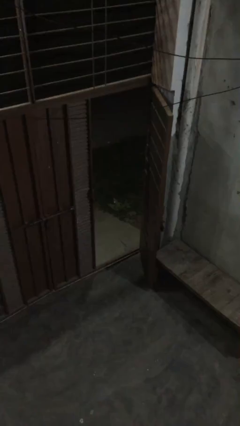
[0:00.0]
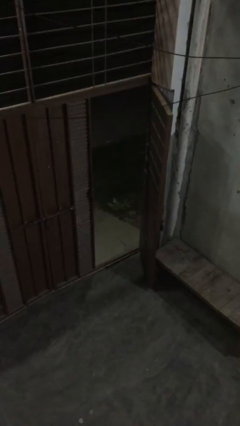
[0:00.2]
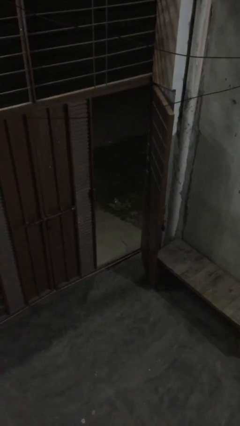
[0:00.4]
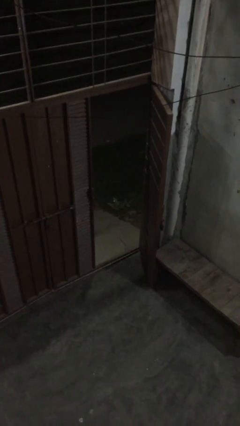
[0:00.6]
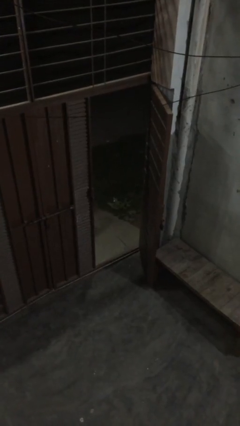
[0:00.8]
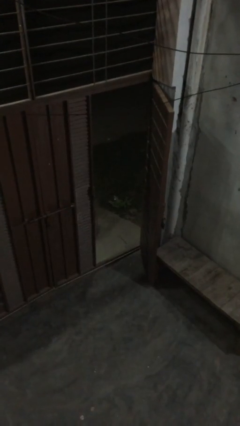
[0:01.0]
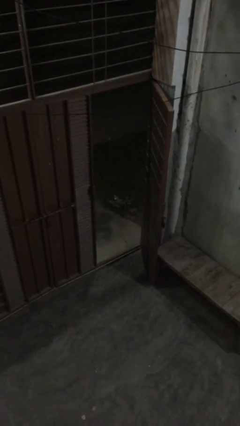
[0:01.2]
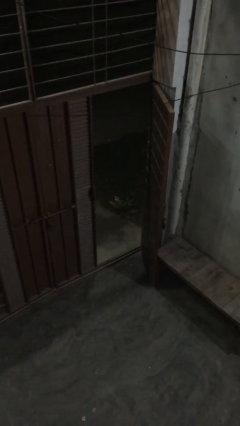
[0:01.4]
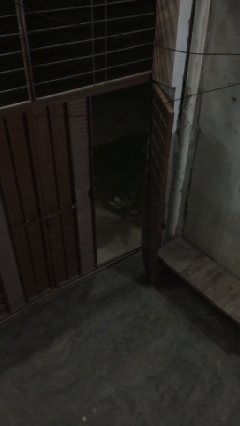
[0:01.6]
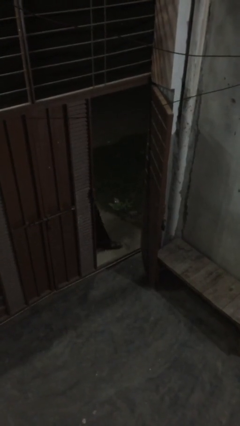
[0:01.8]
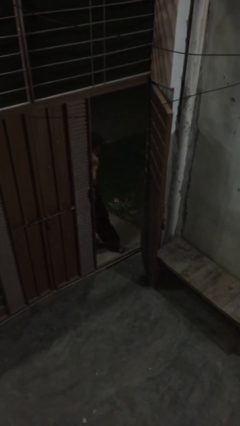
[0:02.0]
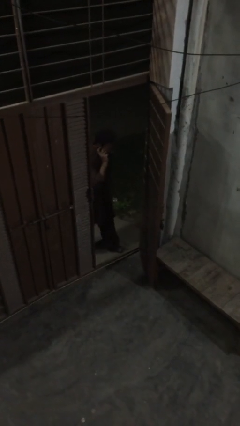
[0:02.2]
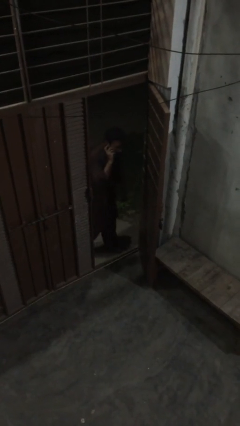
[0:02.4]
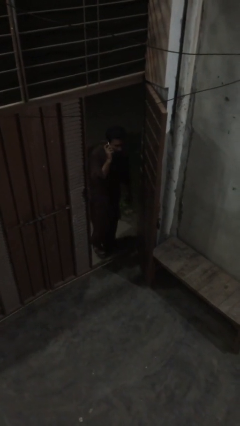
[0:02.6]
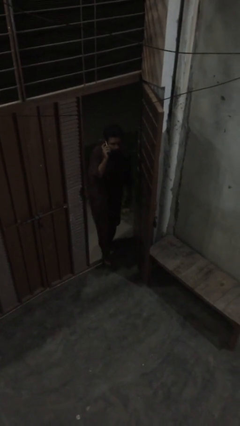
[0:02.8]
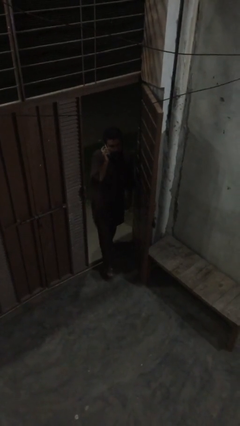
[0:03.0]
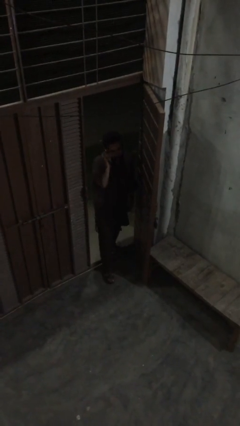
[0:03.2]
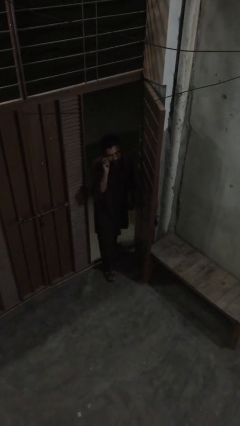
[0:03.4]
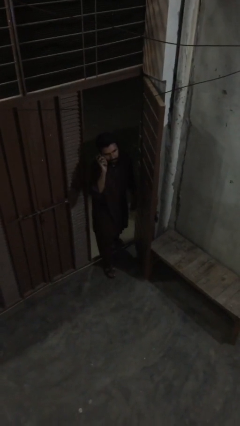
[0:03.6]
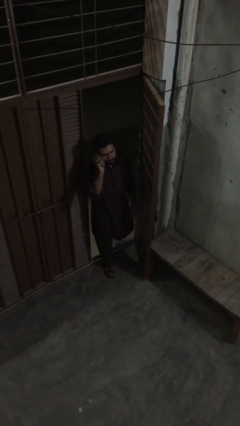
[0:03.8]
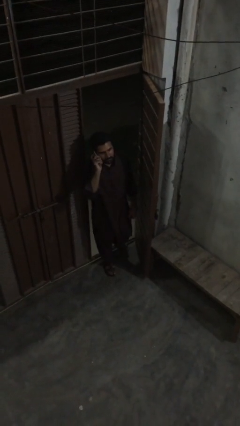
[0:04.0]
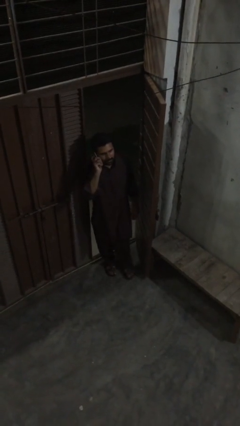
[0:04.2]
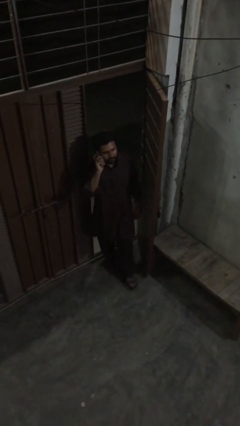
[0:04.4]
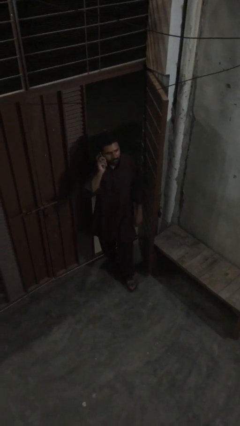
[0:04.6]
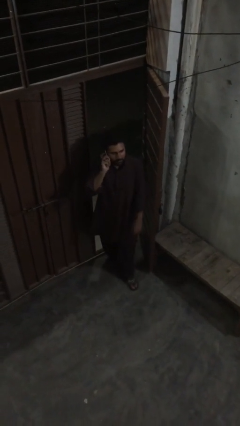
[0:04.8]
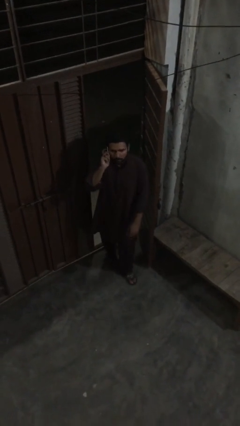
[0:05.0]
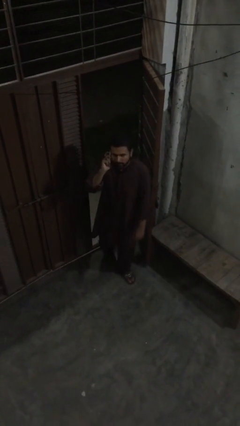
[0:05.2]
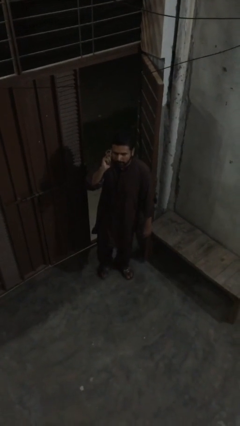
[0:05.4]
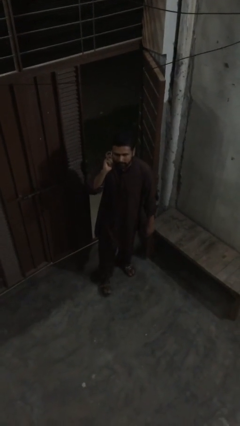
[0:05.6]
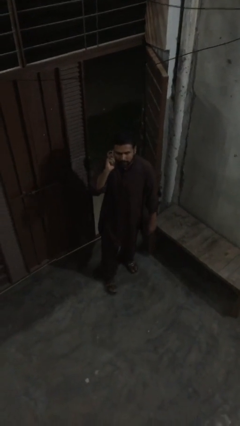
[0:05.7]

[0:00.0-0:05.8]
person enters scene through structure

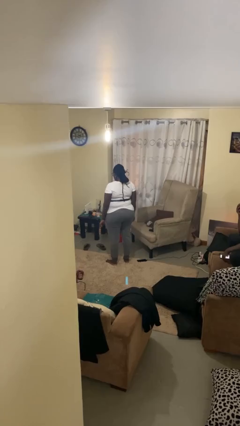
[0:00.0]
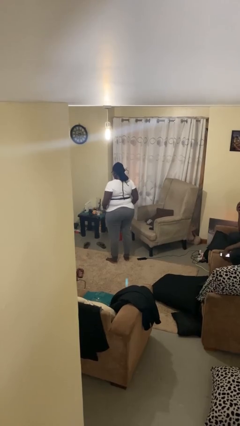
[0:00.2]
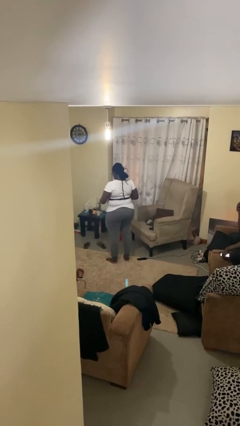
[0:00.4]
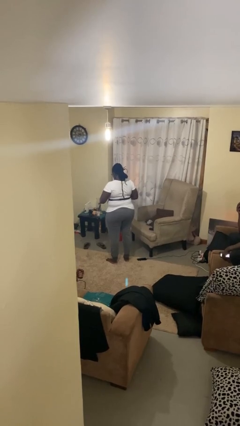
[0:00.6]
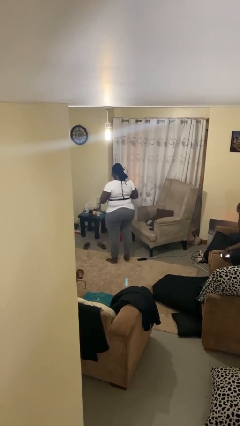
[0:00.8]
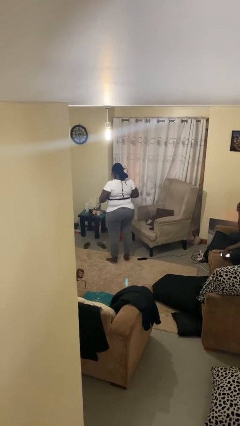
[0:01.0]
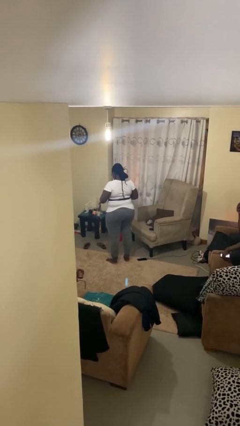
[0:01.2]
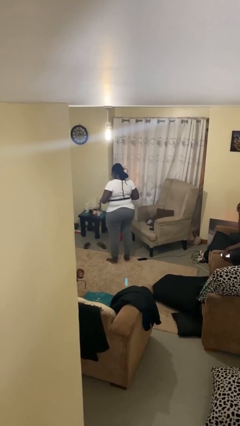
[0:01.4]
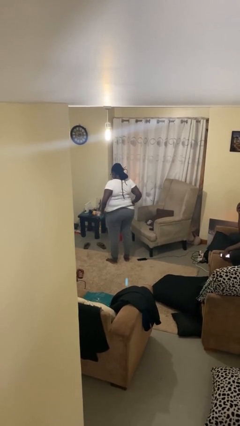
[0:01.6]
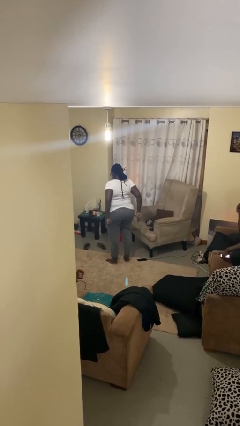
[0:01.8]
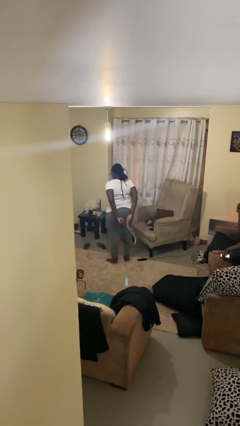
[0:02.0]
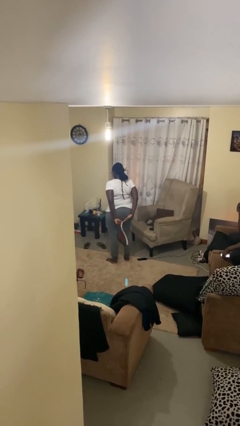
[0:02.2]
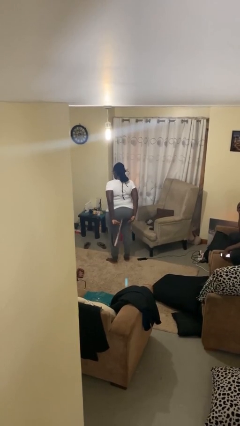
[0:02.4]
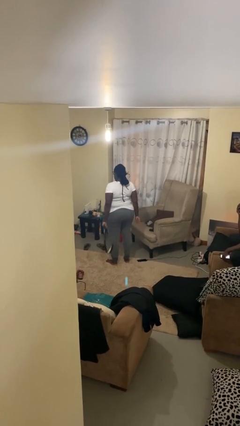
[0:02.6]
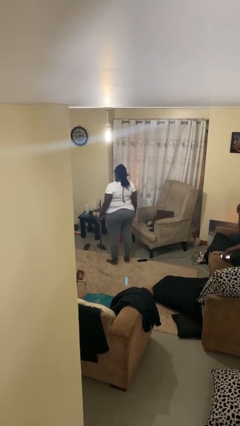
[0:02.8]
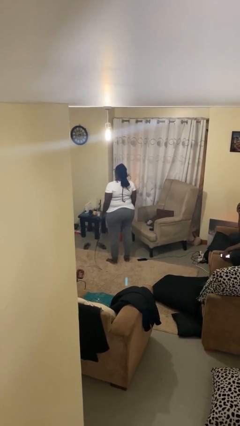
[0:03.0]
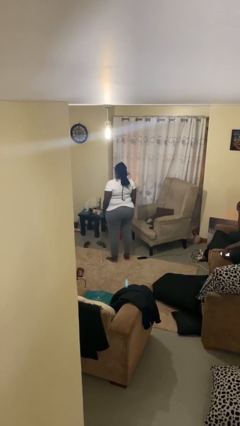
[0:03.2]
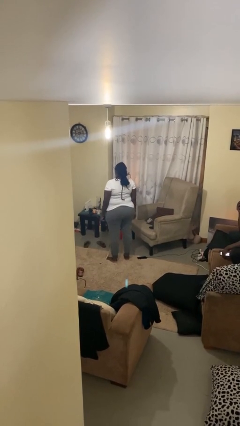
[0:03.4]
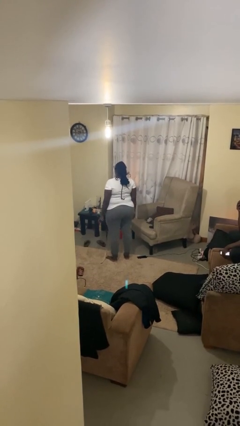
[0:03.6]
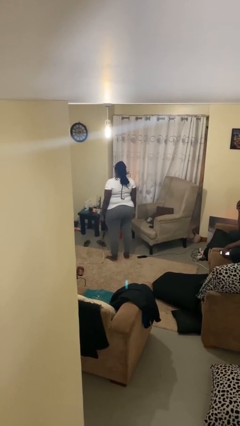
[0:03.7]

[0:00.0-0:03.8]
person takes off belt

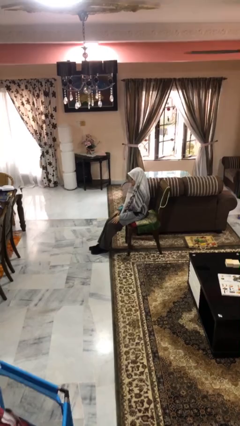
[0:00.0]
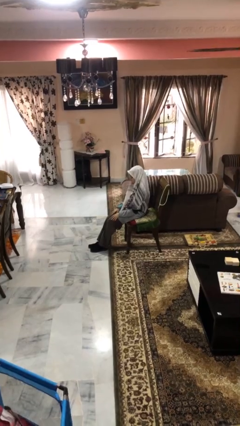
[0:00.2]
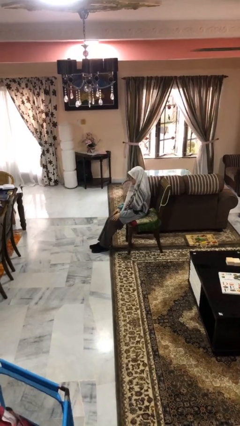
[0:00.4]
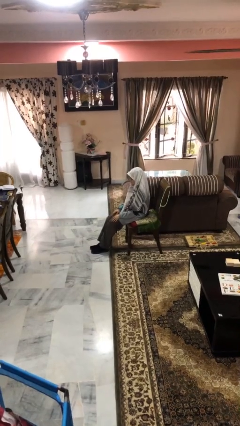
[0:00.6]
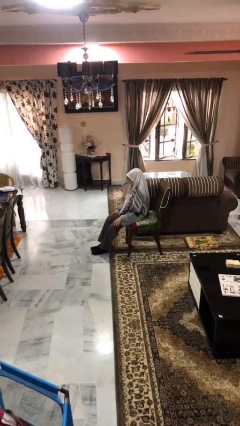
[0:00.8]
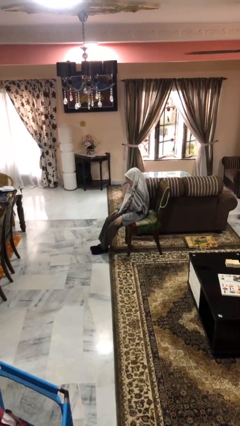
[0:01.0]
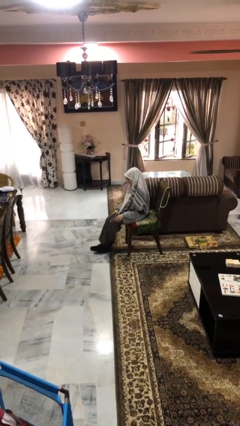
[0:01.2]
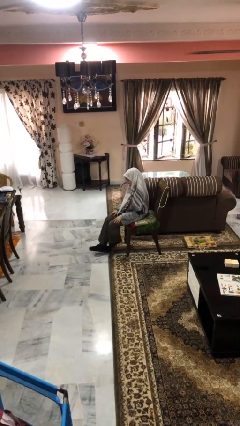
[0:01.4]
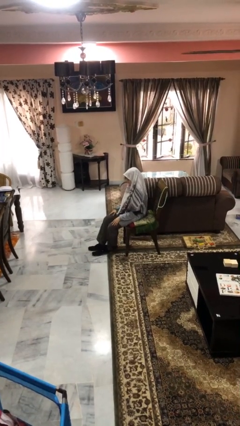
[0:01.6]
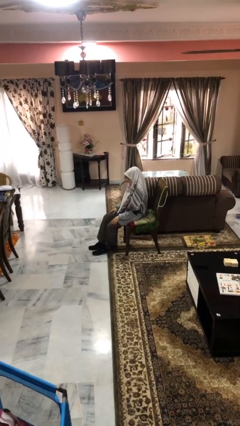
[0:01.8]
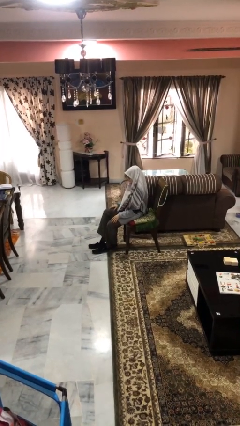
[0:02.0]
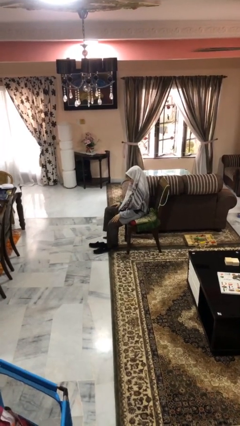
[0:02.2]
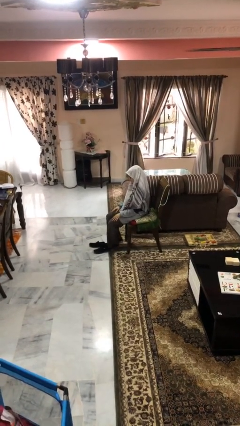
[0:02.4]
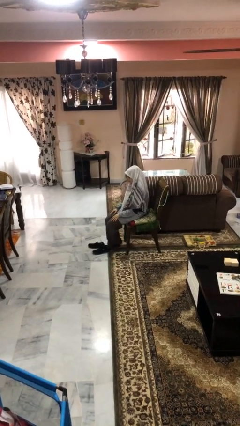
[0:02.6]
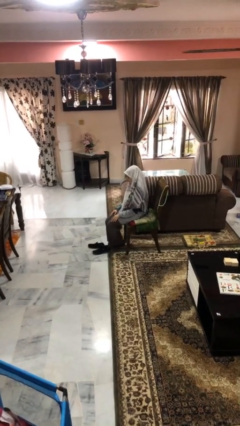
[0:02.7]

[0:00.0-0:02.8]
person takes off shoes

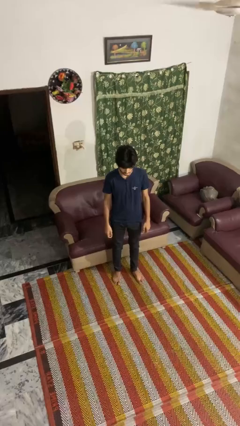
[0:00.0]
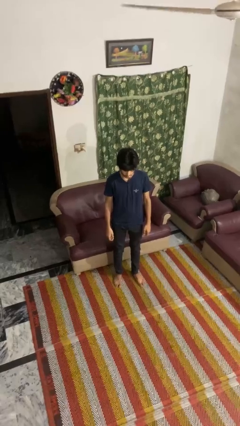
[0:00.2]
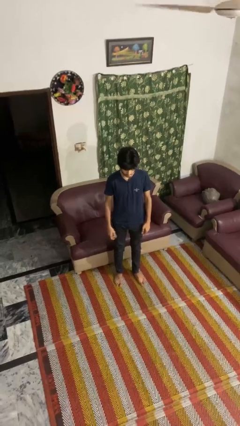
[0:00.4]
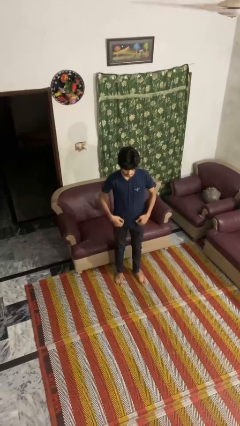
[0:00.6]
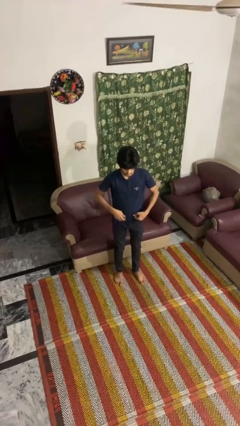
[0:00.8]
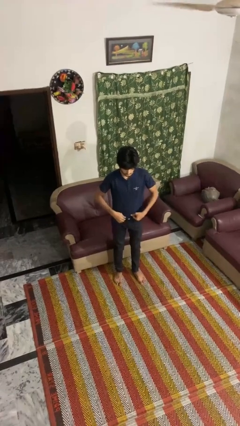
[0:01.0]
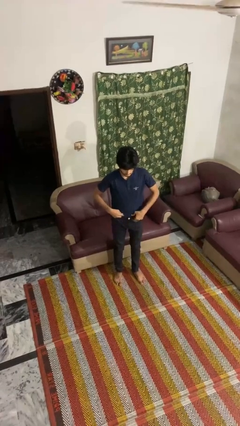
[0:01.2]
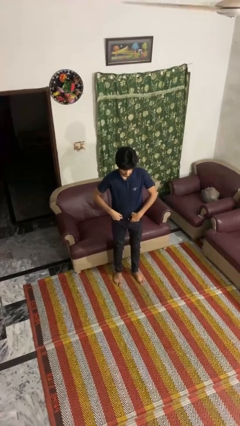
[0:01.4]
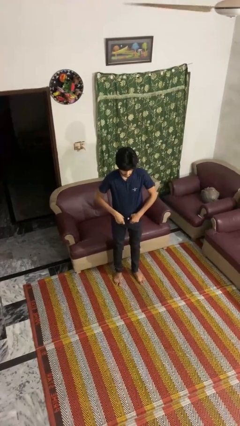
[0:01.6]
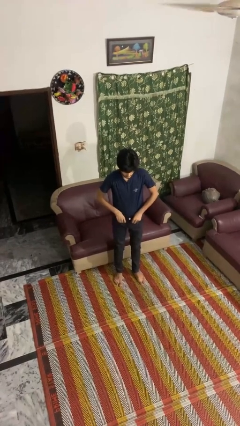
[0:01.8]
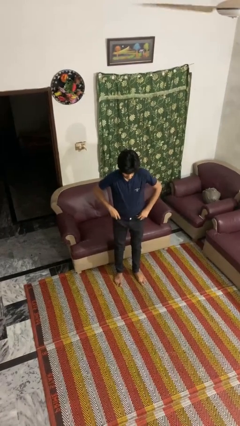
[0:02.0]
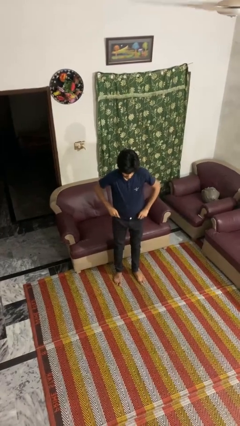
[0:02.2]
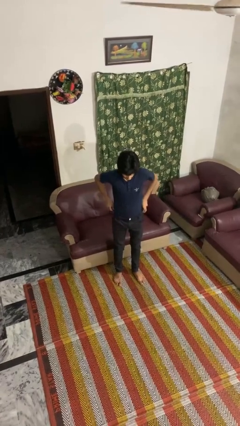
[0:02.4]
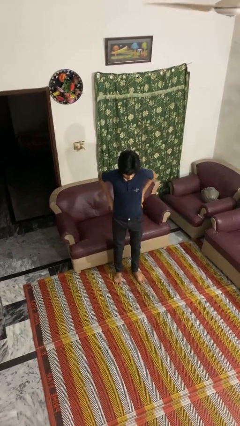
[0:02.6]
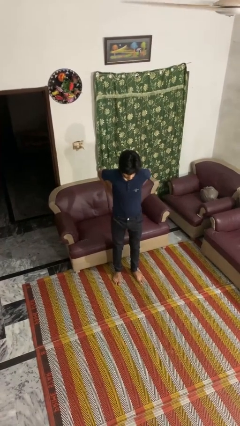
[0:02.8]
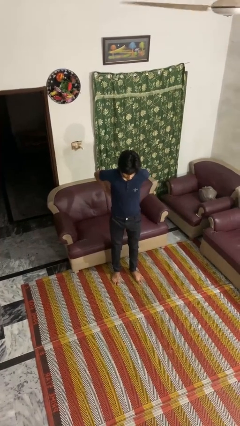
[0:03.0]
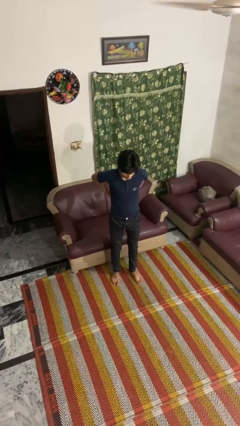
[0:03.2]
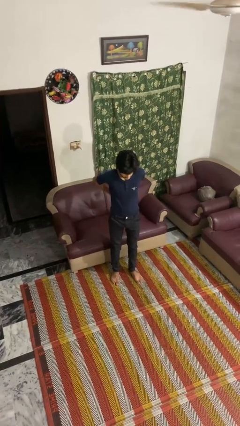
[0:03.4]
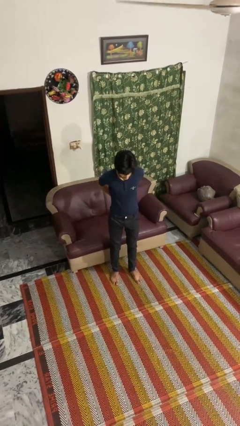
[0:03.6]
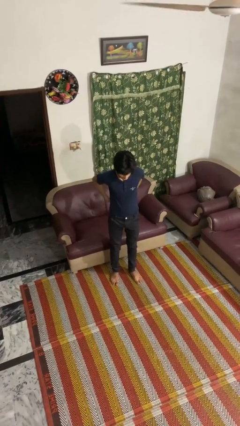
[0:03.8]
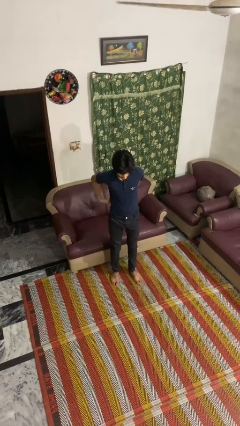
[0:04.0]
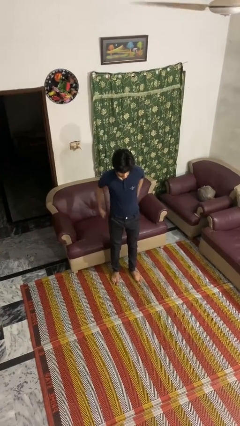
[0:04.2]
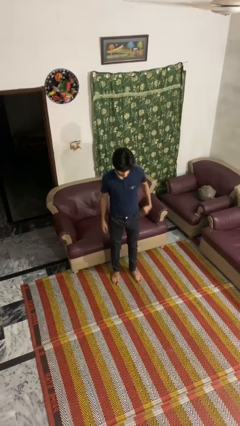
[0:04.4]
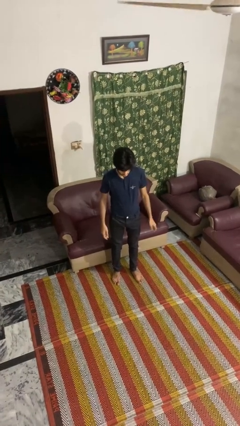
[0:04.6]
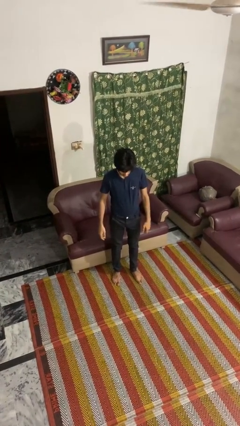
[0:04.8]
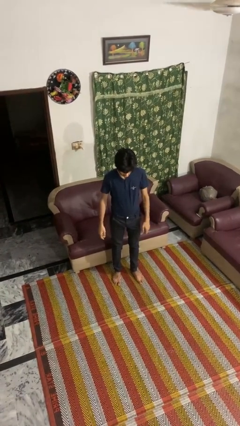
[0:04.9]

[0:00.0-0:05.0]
person tucks in shirt
